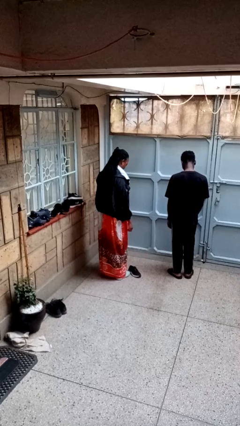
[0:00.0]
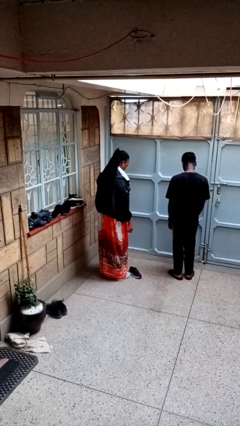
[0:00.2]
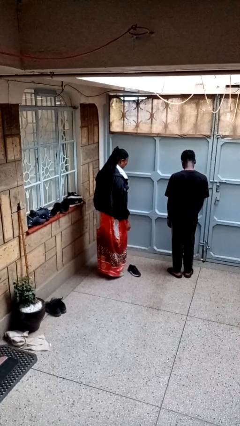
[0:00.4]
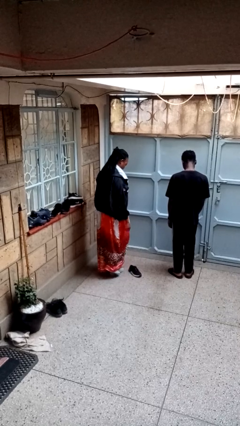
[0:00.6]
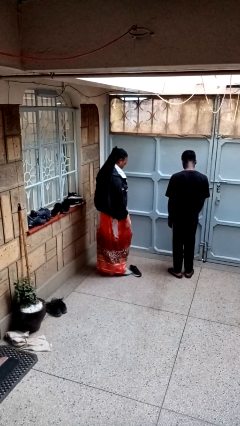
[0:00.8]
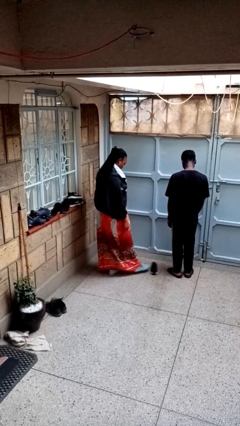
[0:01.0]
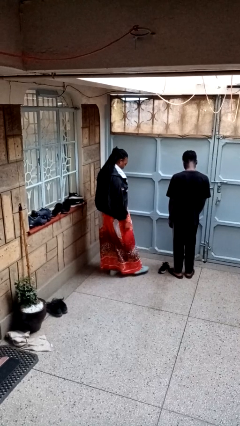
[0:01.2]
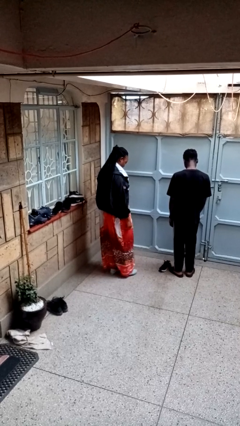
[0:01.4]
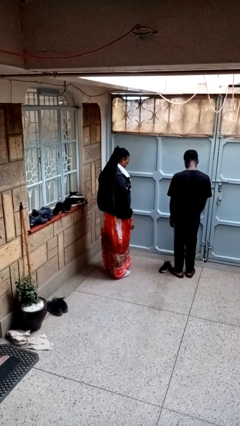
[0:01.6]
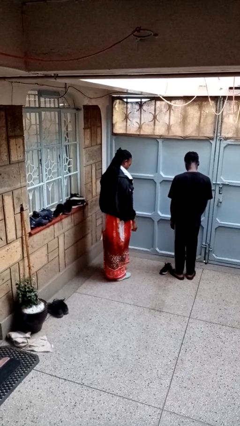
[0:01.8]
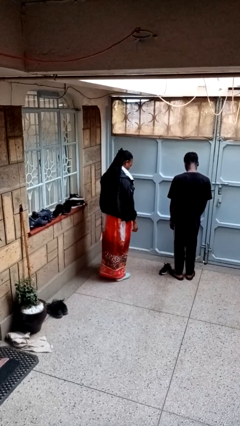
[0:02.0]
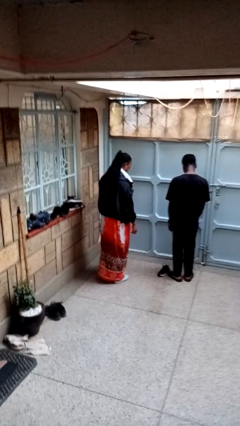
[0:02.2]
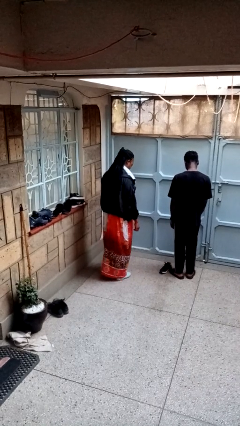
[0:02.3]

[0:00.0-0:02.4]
person kicks object to person

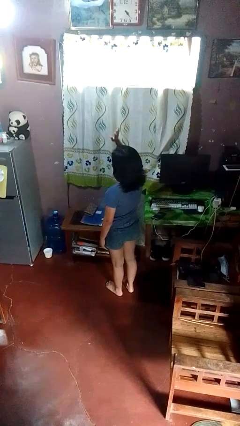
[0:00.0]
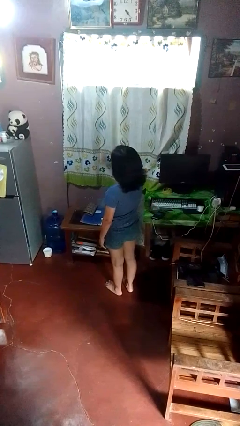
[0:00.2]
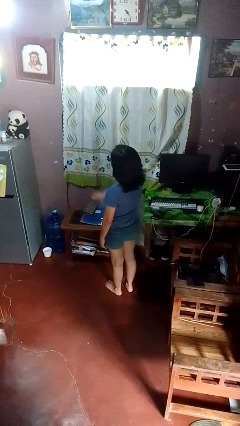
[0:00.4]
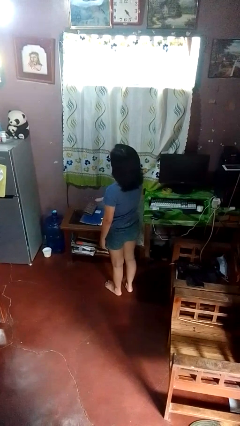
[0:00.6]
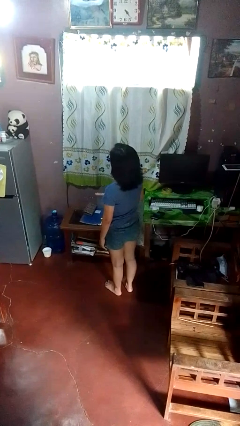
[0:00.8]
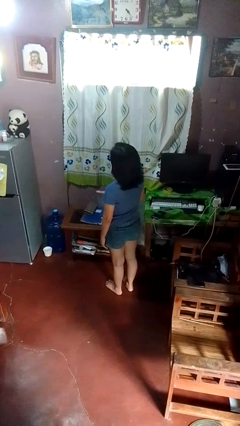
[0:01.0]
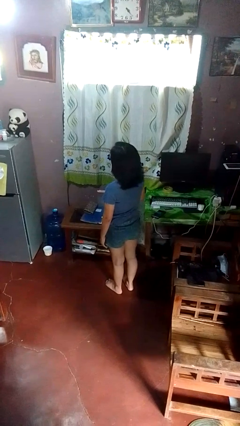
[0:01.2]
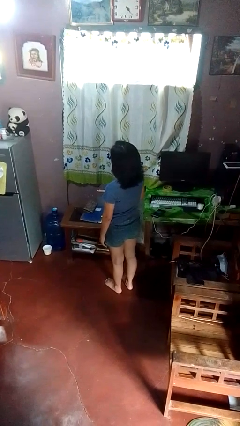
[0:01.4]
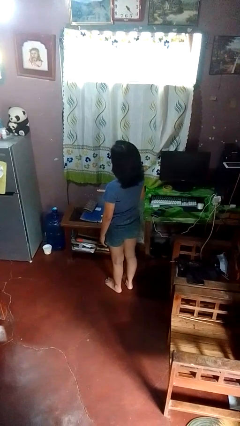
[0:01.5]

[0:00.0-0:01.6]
person gestures swipe down

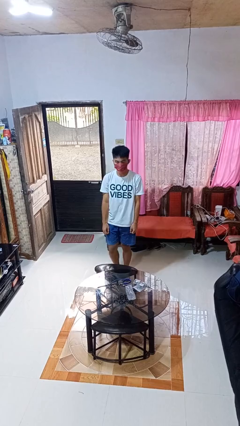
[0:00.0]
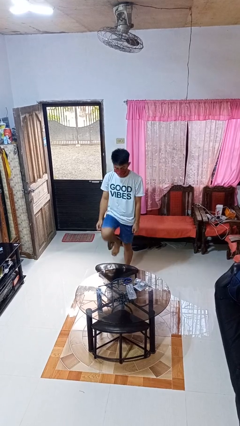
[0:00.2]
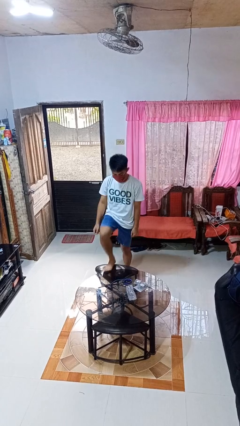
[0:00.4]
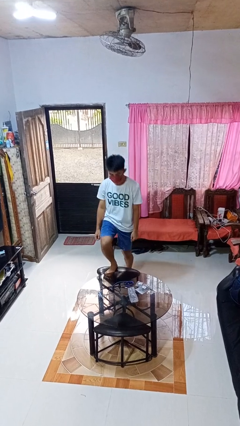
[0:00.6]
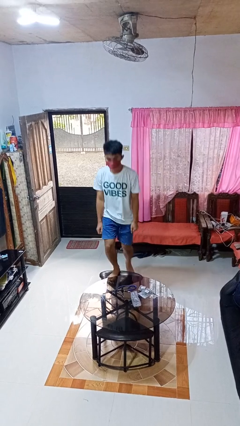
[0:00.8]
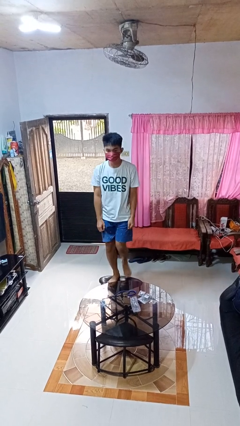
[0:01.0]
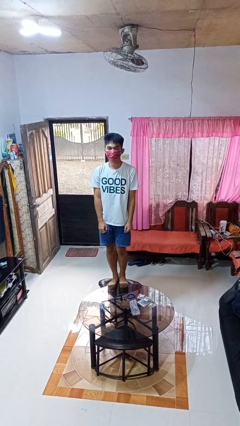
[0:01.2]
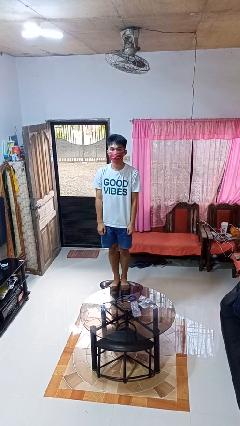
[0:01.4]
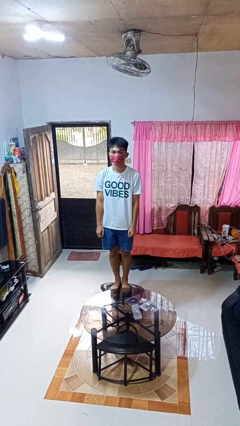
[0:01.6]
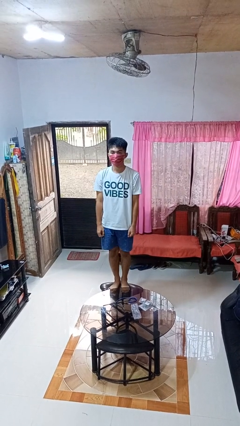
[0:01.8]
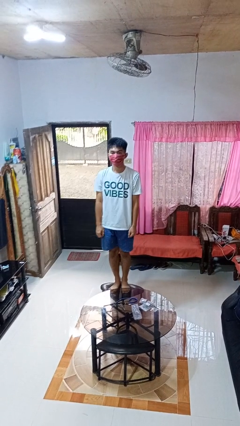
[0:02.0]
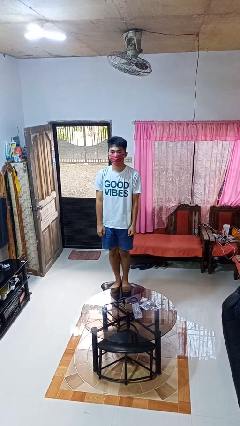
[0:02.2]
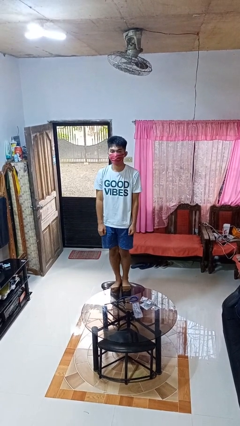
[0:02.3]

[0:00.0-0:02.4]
person climbs on chair

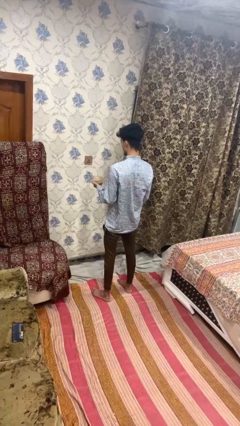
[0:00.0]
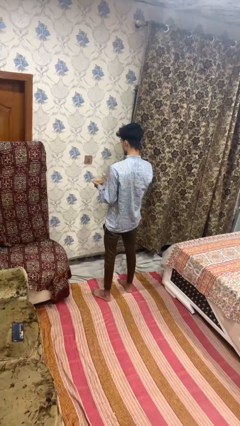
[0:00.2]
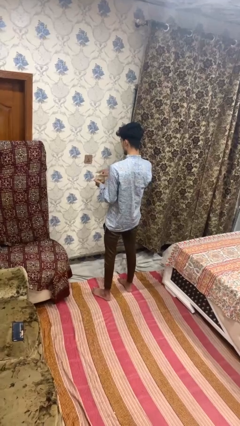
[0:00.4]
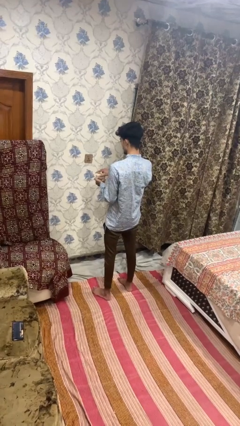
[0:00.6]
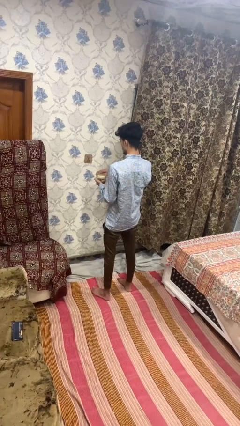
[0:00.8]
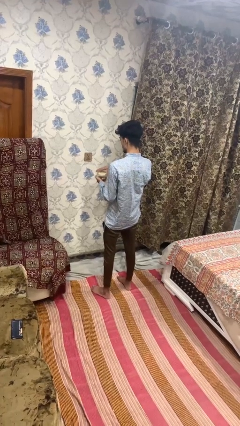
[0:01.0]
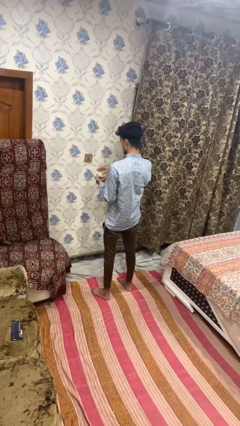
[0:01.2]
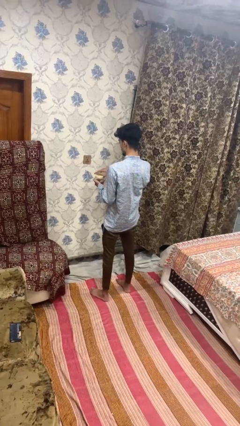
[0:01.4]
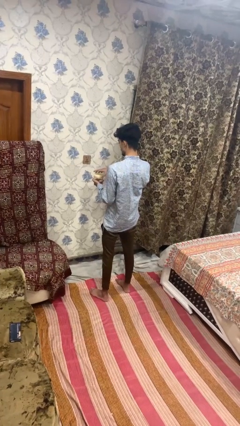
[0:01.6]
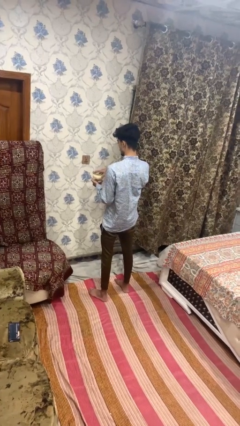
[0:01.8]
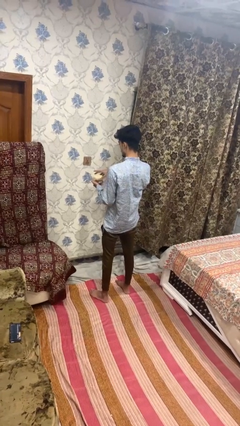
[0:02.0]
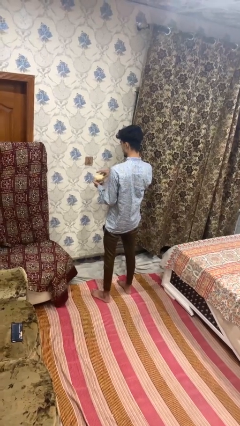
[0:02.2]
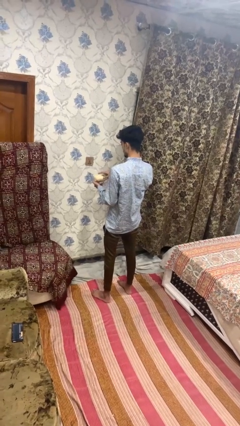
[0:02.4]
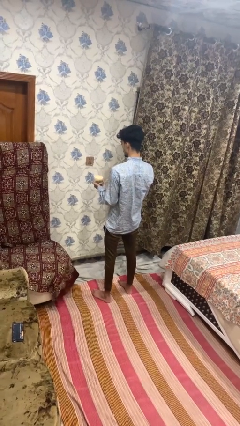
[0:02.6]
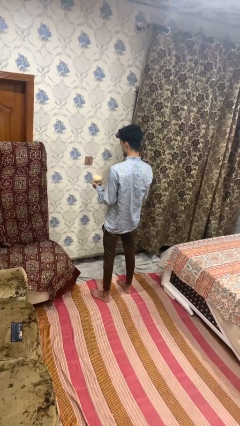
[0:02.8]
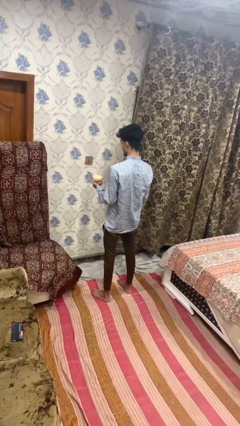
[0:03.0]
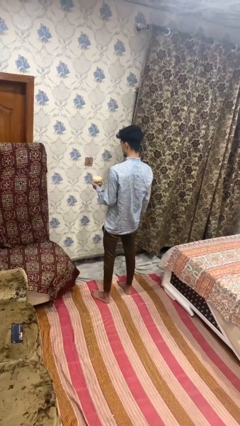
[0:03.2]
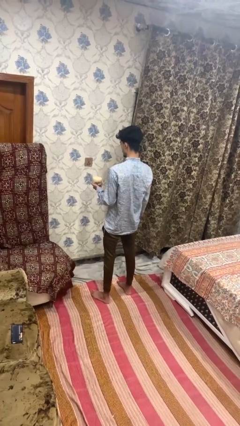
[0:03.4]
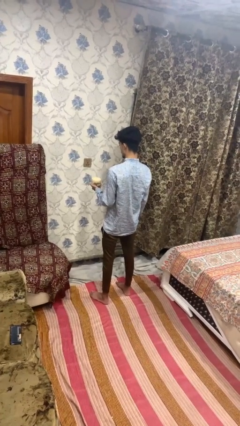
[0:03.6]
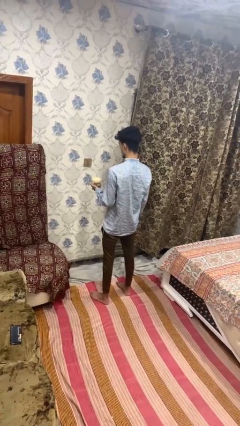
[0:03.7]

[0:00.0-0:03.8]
person closes jar

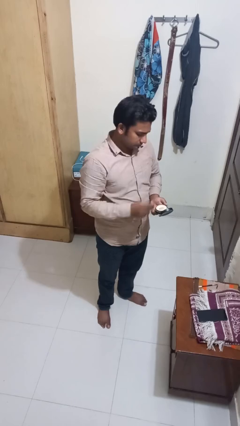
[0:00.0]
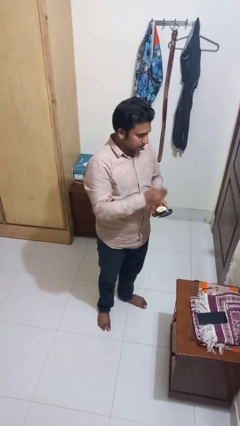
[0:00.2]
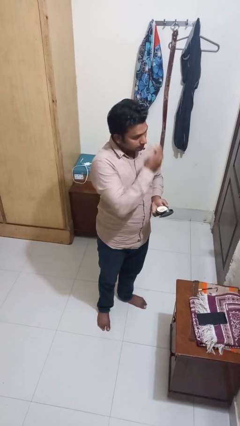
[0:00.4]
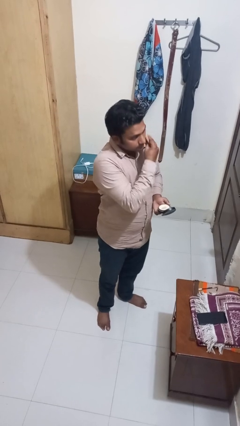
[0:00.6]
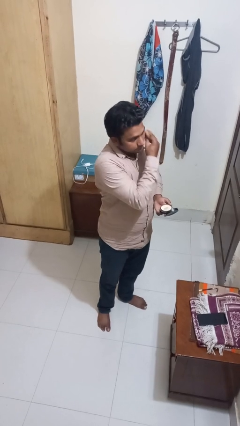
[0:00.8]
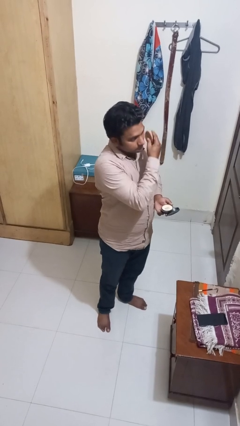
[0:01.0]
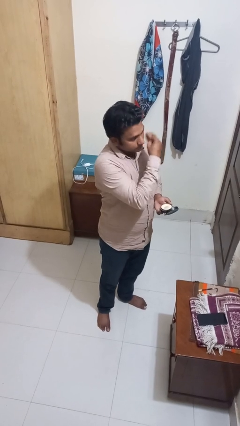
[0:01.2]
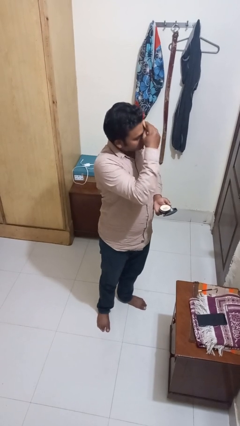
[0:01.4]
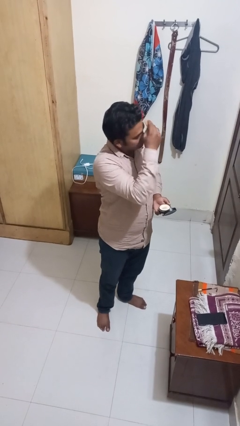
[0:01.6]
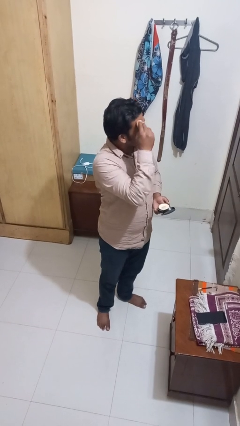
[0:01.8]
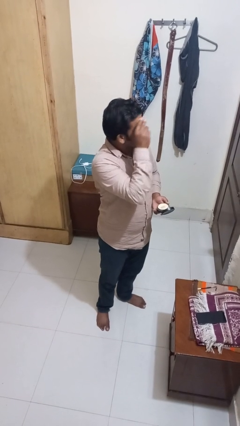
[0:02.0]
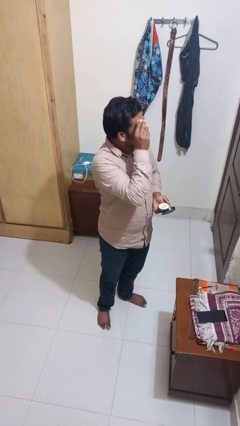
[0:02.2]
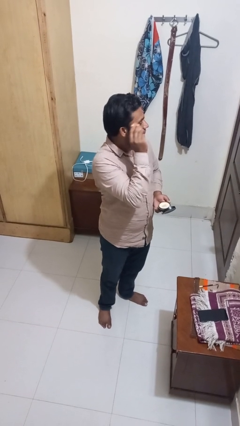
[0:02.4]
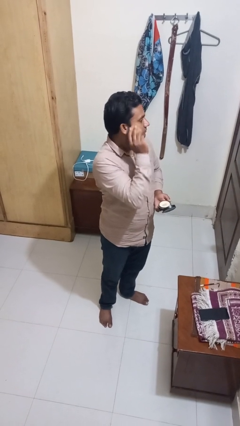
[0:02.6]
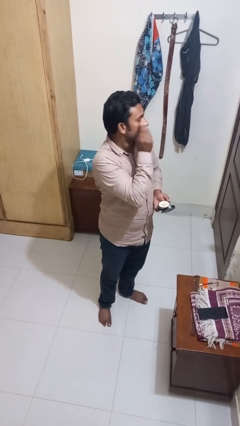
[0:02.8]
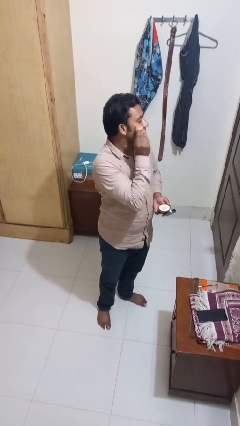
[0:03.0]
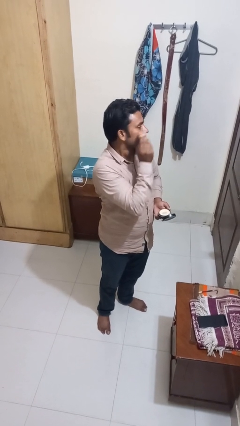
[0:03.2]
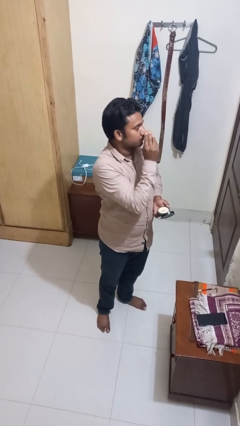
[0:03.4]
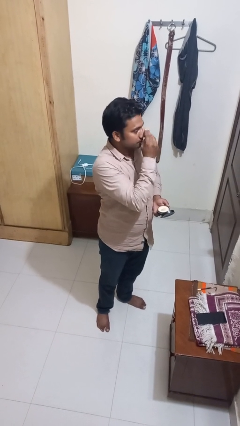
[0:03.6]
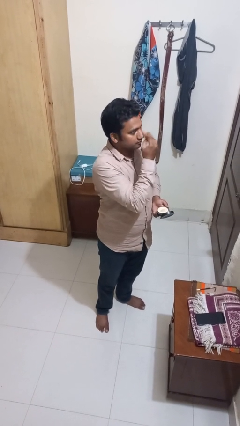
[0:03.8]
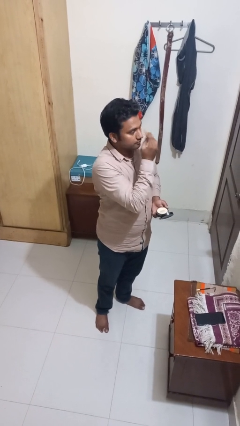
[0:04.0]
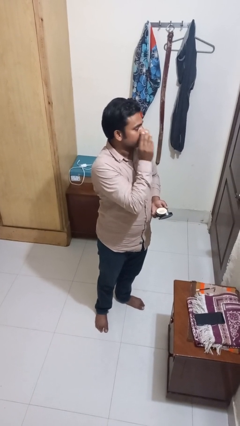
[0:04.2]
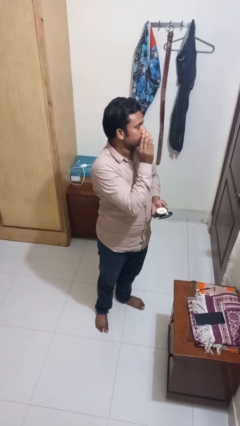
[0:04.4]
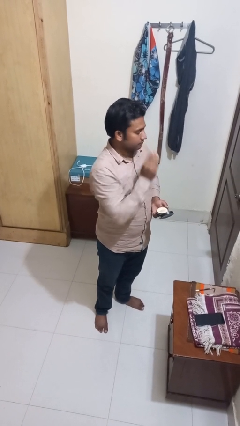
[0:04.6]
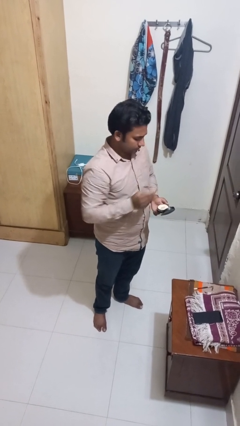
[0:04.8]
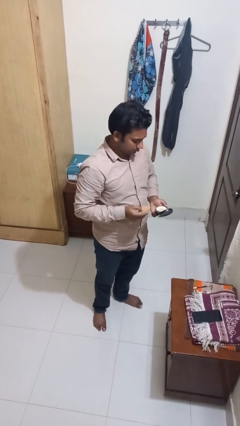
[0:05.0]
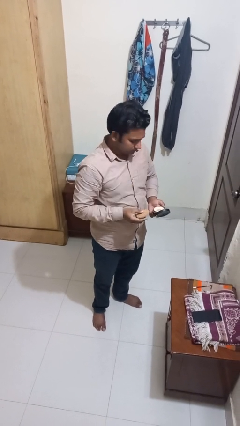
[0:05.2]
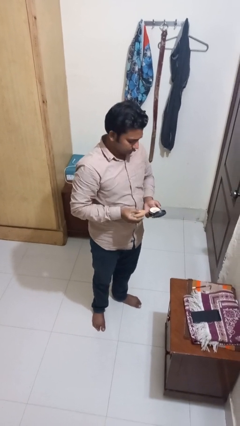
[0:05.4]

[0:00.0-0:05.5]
person applies foundation makeup

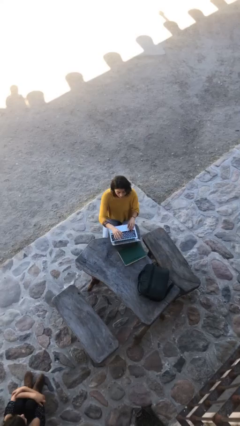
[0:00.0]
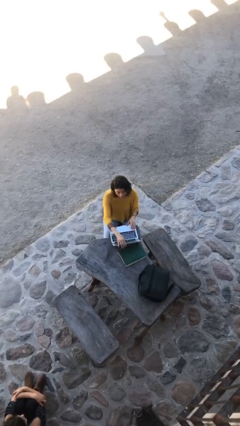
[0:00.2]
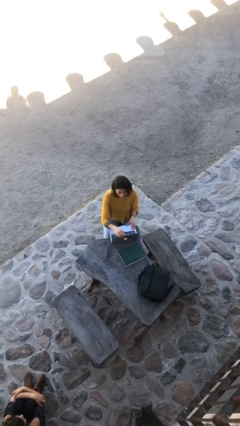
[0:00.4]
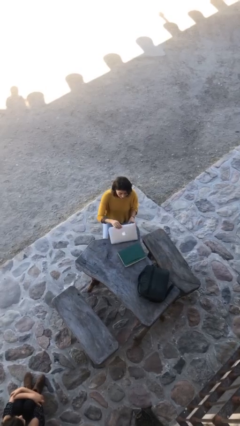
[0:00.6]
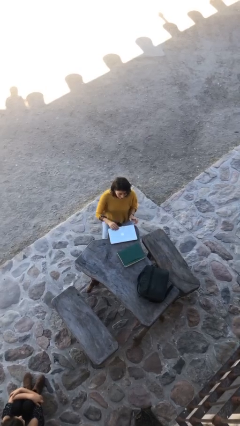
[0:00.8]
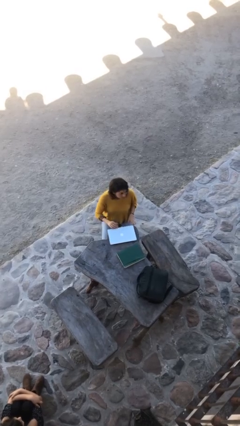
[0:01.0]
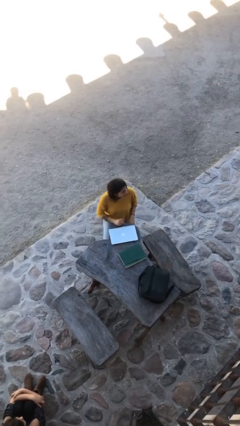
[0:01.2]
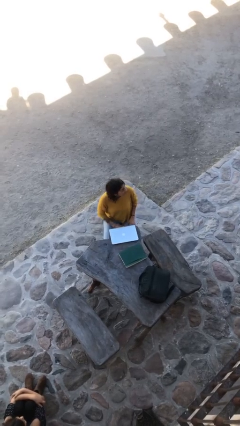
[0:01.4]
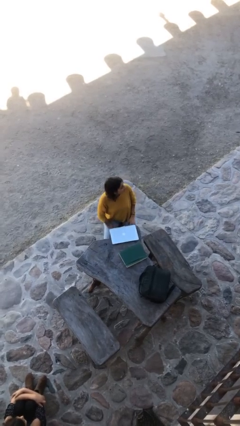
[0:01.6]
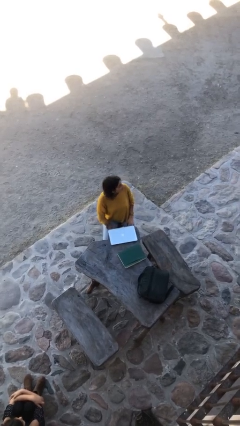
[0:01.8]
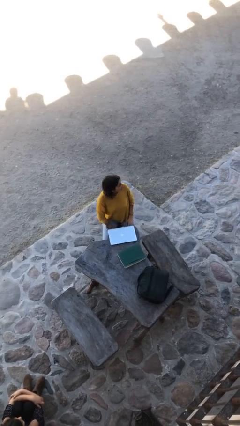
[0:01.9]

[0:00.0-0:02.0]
person interacts with laptop
